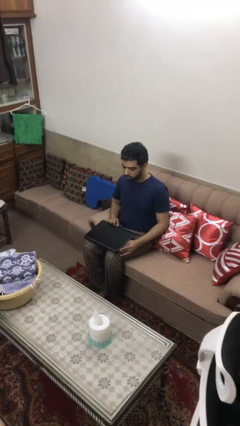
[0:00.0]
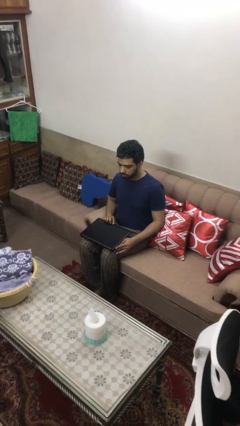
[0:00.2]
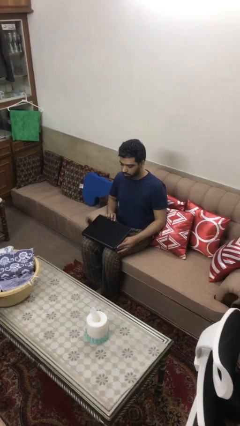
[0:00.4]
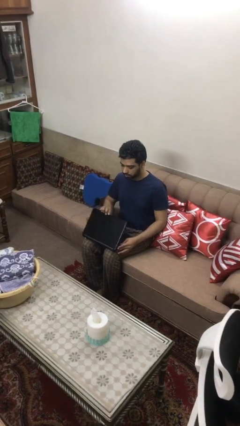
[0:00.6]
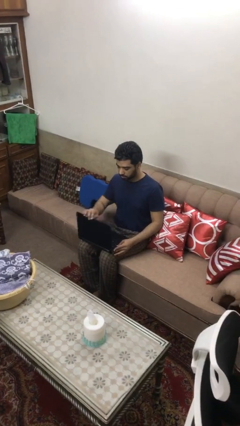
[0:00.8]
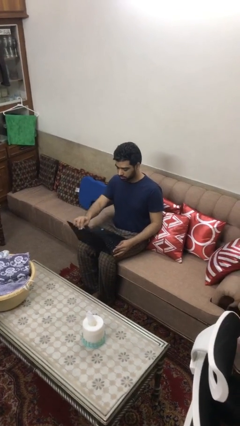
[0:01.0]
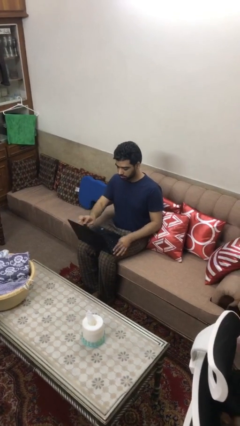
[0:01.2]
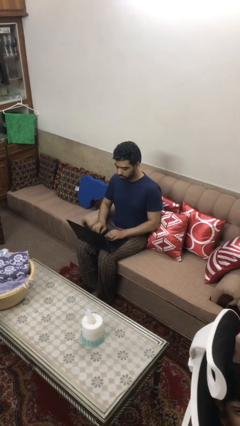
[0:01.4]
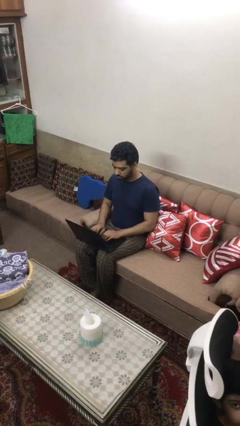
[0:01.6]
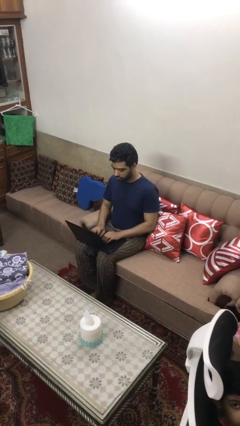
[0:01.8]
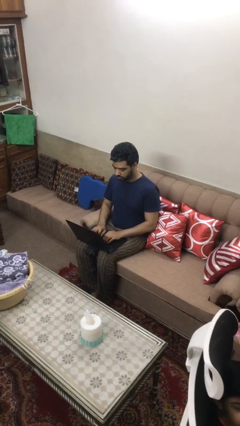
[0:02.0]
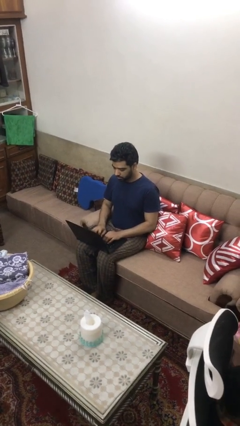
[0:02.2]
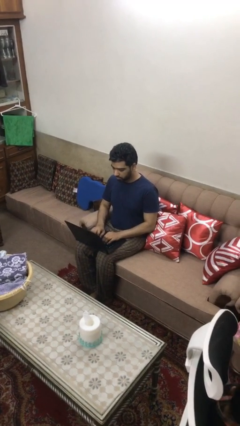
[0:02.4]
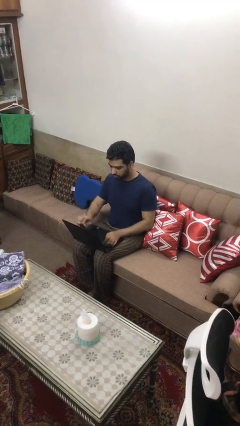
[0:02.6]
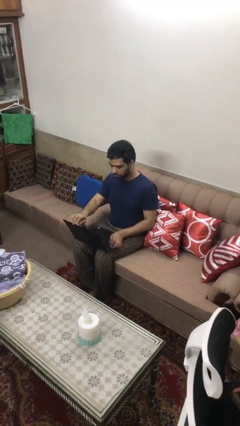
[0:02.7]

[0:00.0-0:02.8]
person interacts with laptop

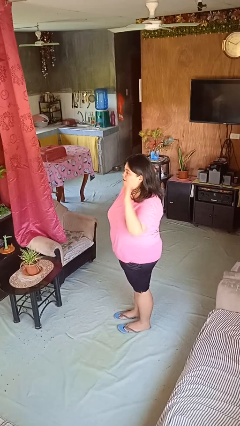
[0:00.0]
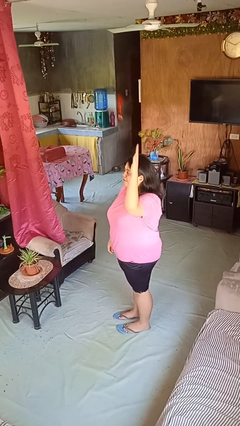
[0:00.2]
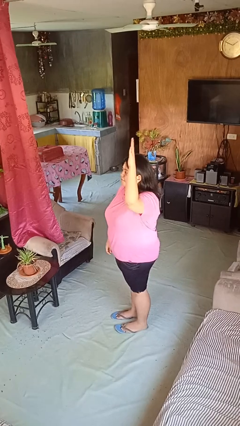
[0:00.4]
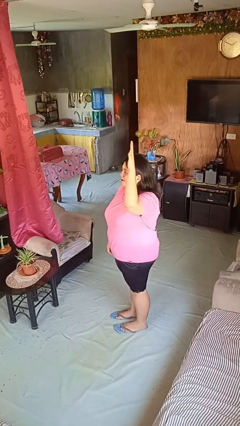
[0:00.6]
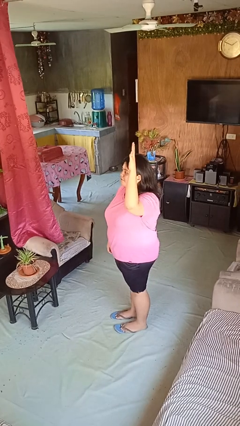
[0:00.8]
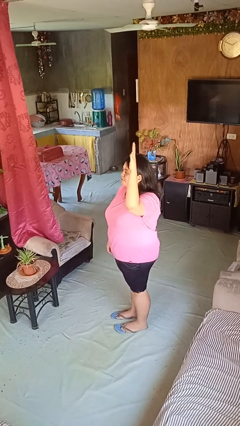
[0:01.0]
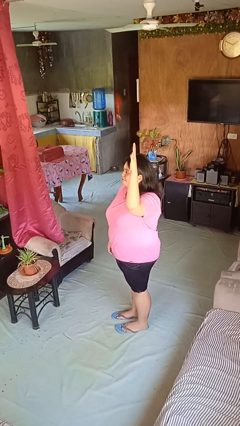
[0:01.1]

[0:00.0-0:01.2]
person gestures raise hand

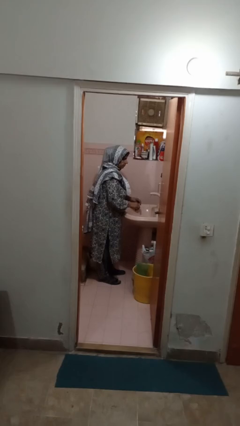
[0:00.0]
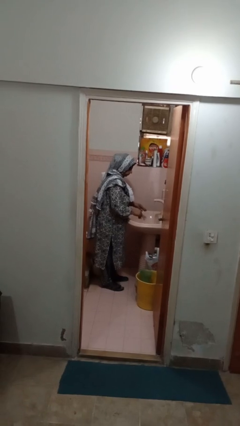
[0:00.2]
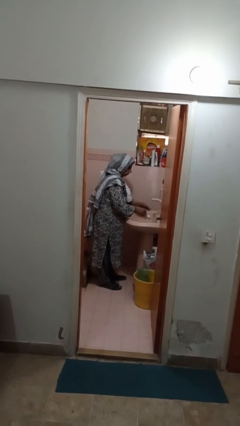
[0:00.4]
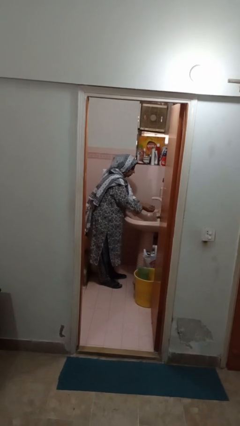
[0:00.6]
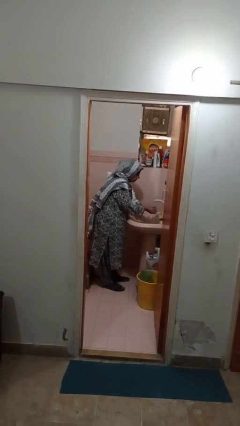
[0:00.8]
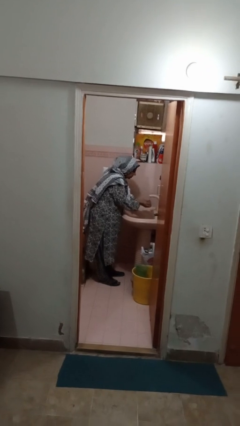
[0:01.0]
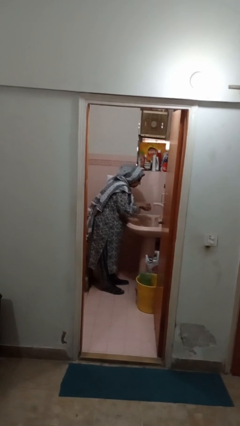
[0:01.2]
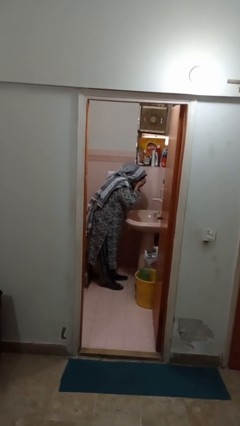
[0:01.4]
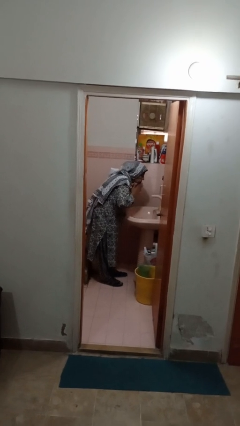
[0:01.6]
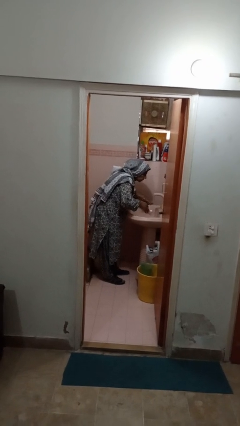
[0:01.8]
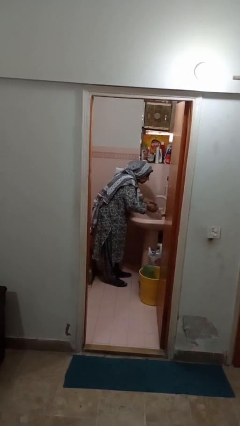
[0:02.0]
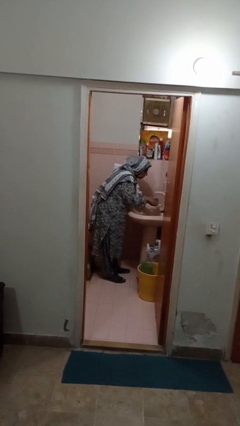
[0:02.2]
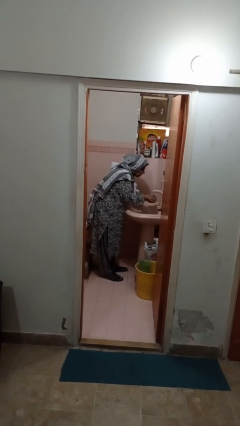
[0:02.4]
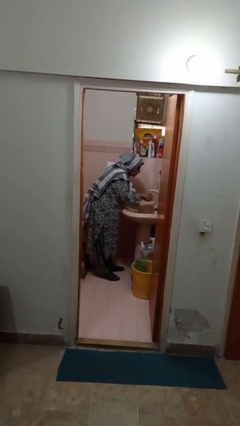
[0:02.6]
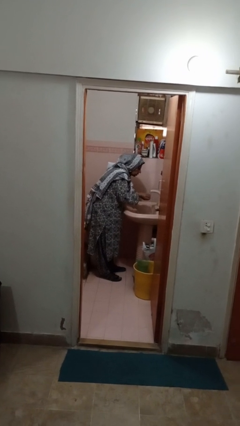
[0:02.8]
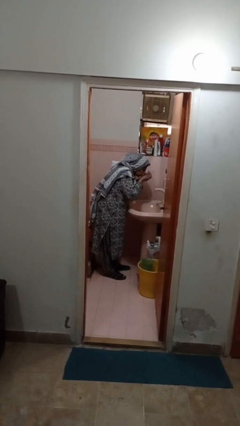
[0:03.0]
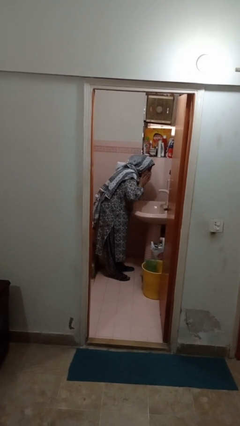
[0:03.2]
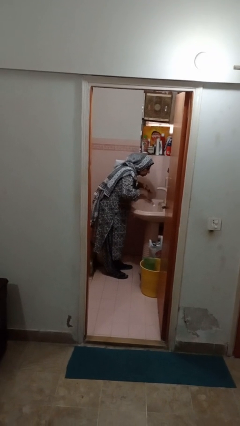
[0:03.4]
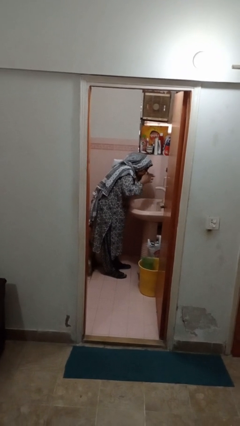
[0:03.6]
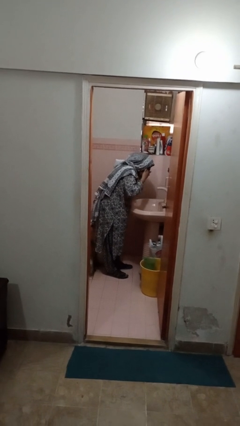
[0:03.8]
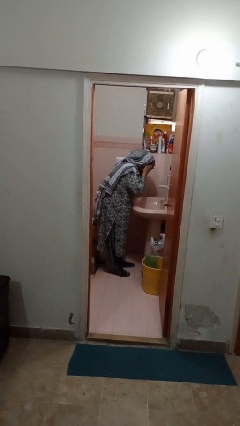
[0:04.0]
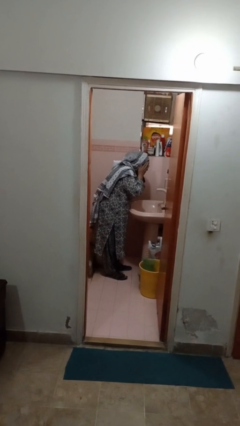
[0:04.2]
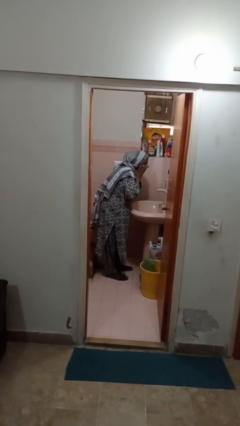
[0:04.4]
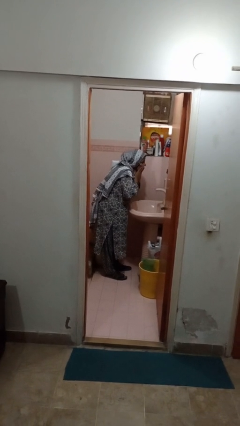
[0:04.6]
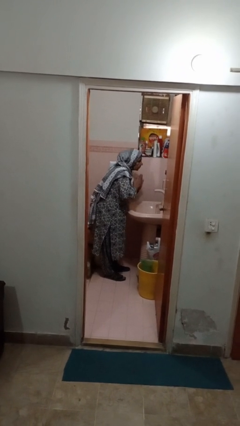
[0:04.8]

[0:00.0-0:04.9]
person washes face

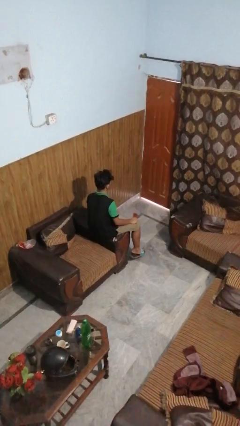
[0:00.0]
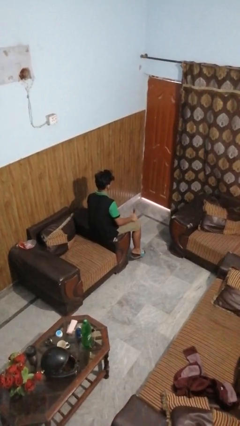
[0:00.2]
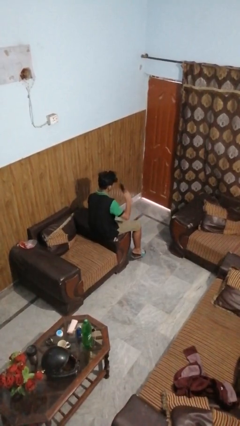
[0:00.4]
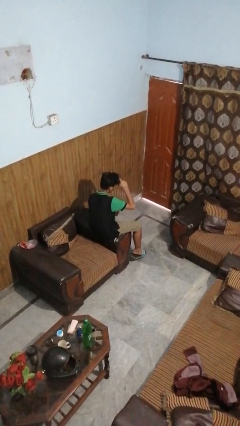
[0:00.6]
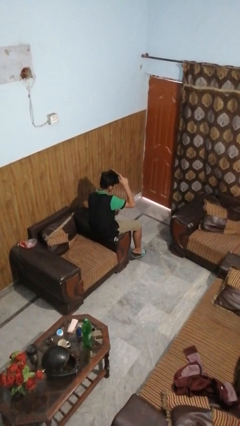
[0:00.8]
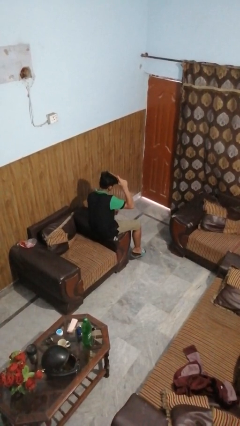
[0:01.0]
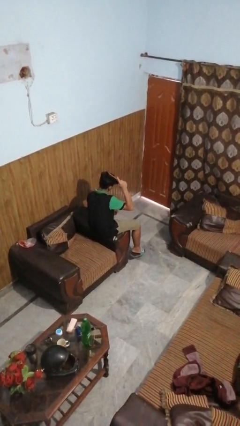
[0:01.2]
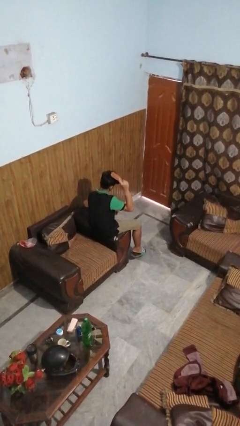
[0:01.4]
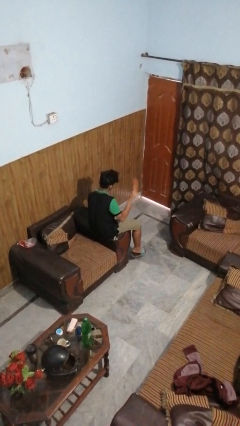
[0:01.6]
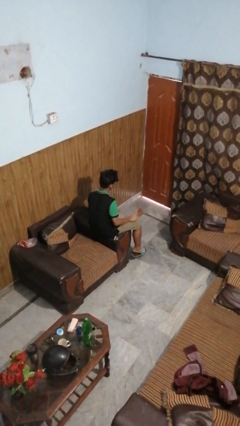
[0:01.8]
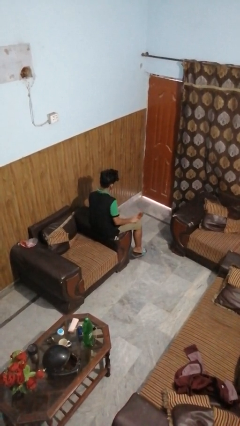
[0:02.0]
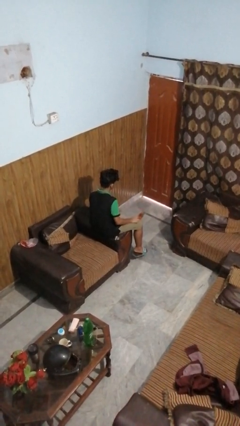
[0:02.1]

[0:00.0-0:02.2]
person brushes hair

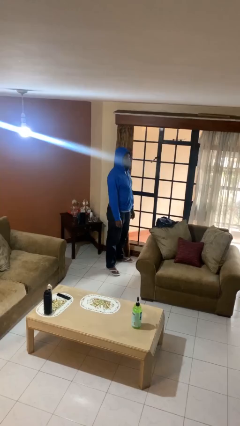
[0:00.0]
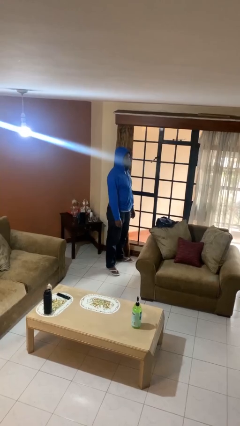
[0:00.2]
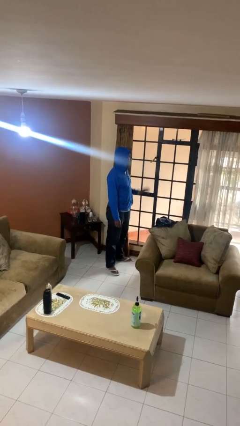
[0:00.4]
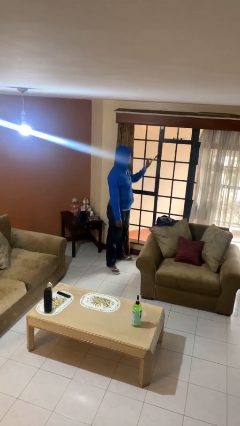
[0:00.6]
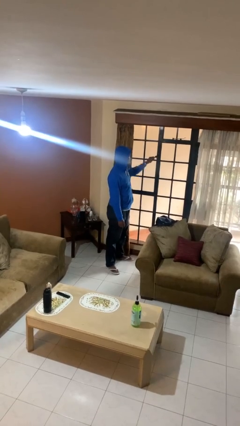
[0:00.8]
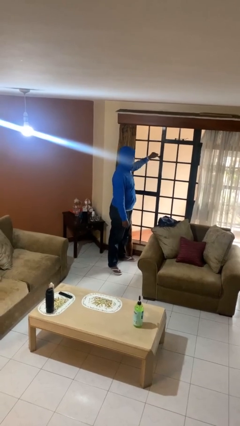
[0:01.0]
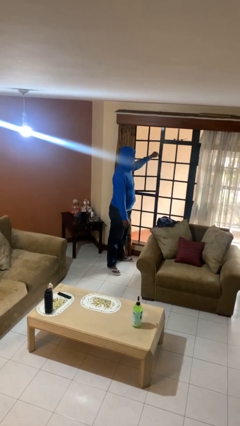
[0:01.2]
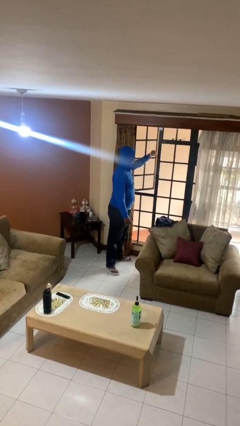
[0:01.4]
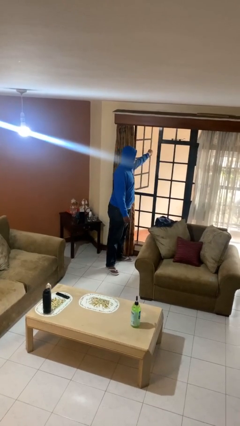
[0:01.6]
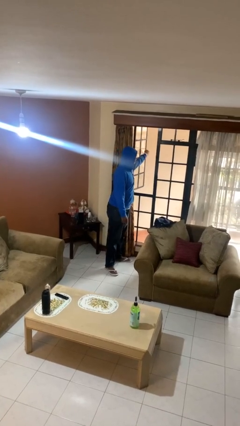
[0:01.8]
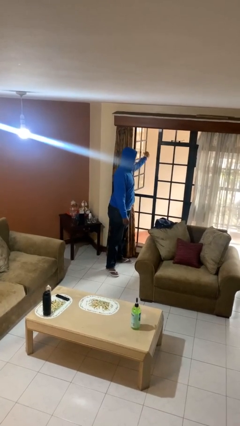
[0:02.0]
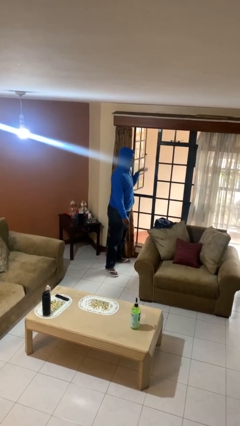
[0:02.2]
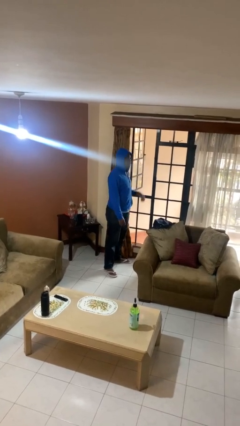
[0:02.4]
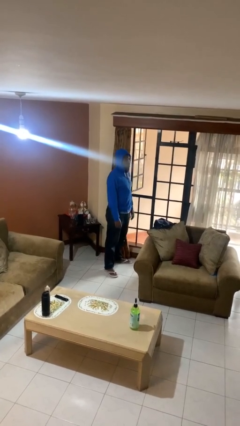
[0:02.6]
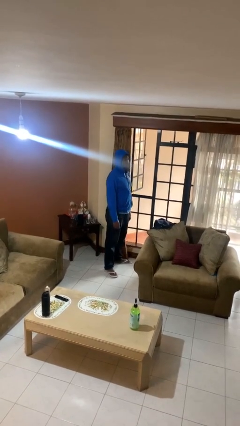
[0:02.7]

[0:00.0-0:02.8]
person opens home window

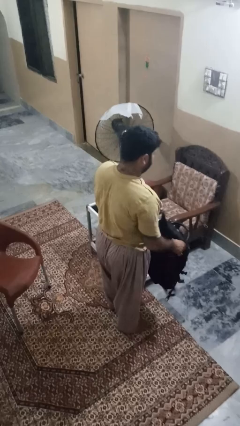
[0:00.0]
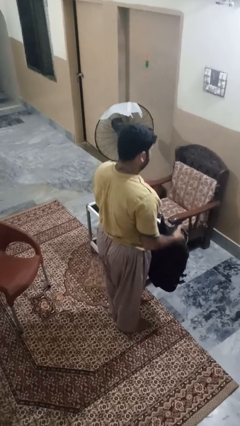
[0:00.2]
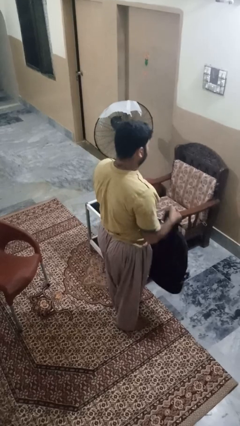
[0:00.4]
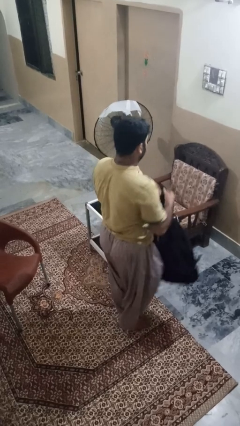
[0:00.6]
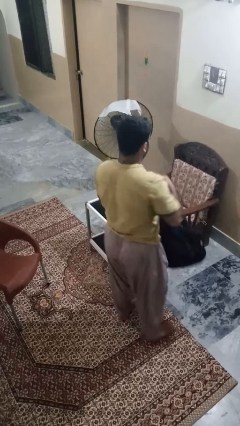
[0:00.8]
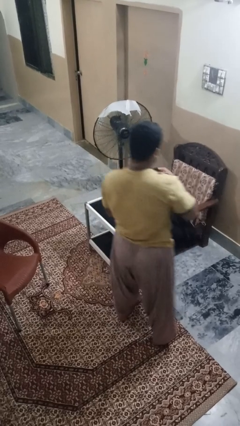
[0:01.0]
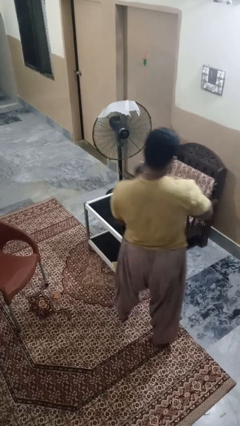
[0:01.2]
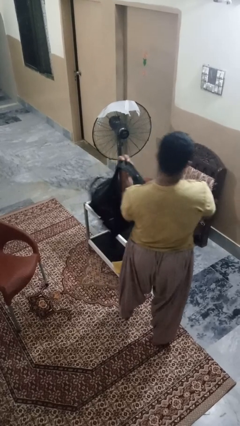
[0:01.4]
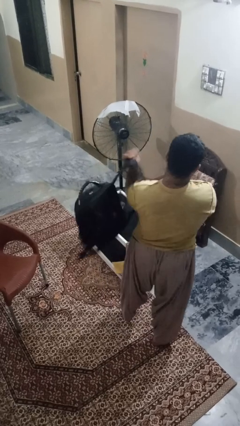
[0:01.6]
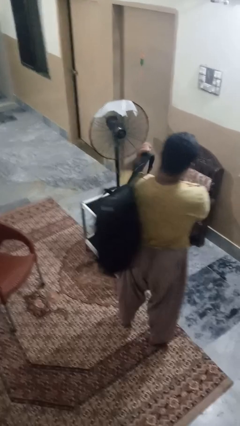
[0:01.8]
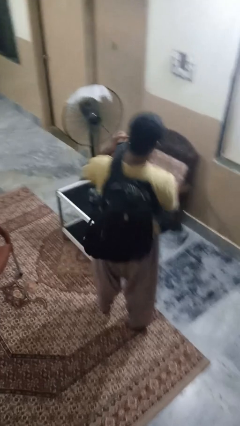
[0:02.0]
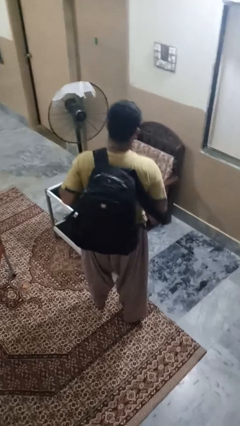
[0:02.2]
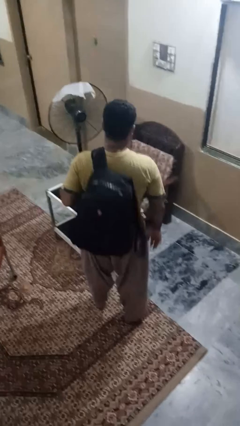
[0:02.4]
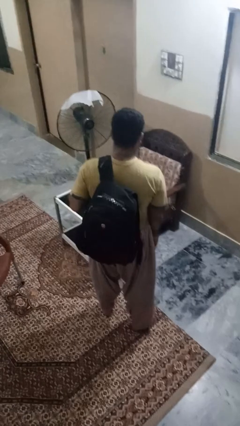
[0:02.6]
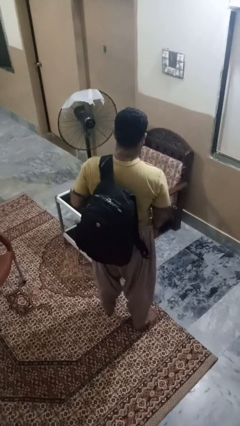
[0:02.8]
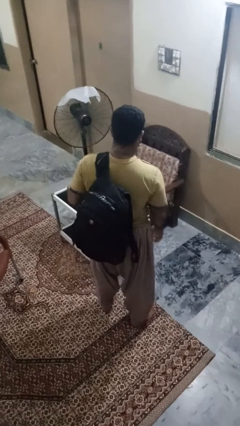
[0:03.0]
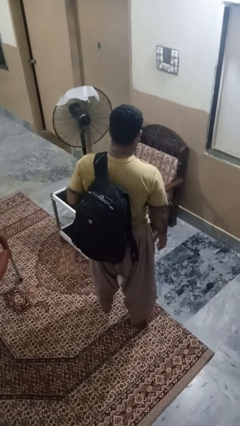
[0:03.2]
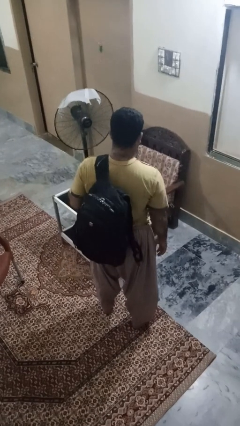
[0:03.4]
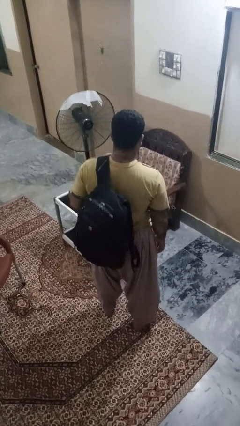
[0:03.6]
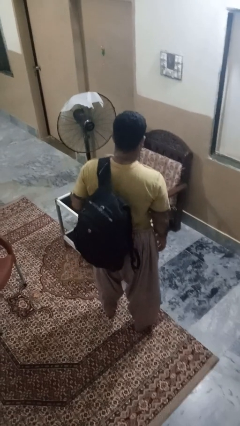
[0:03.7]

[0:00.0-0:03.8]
person puts on backpack
